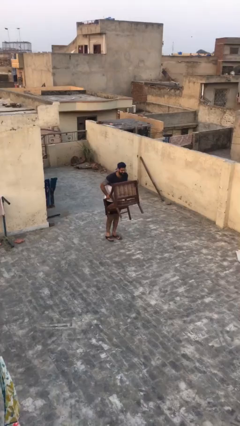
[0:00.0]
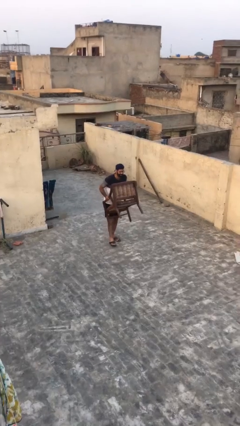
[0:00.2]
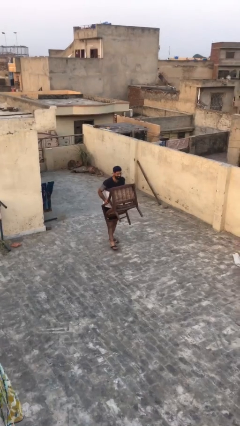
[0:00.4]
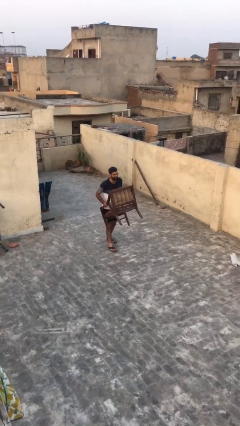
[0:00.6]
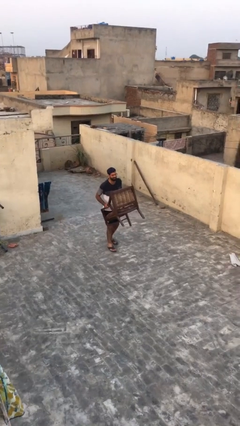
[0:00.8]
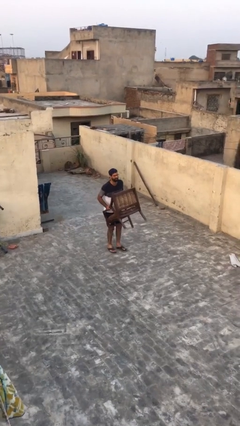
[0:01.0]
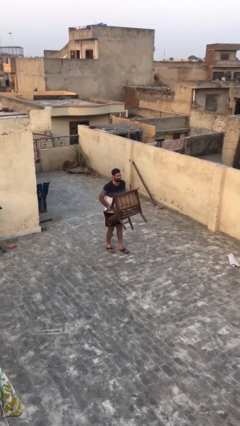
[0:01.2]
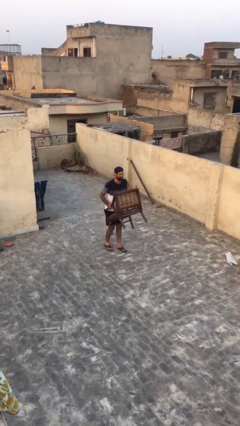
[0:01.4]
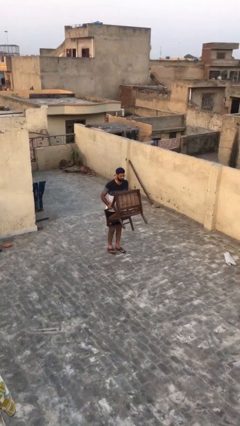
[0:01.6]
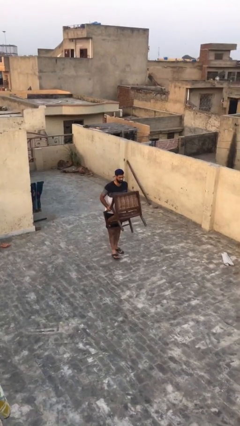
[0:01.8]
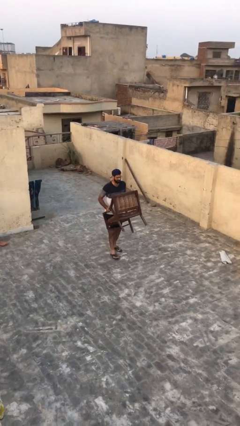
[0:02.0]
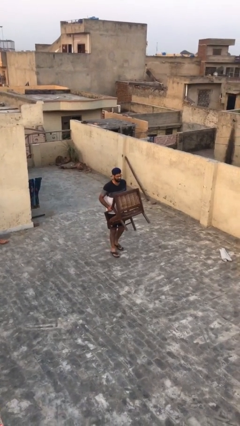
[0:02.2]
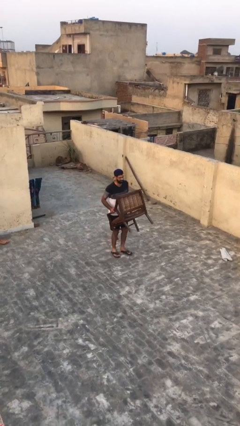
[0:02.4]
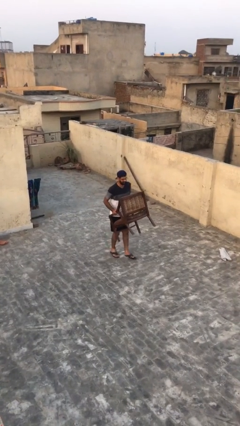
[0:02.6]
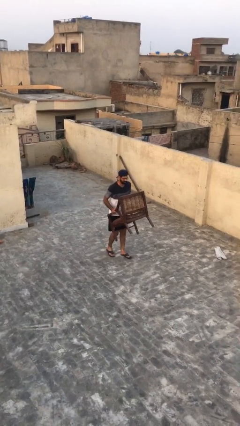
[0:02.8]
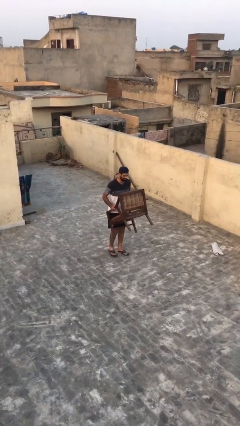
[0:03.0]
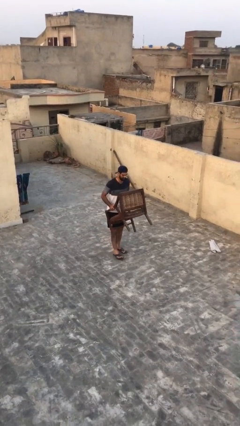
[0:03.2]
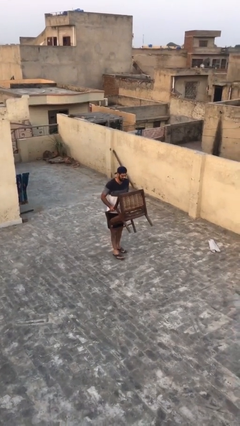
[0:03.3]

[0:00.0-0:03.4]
person carries heavy object

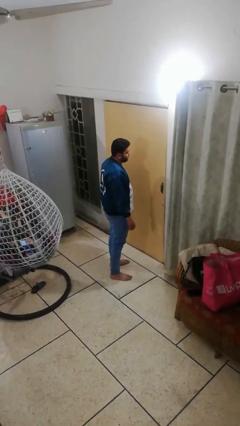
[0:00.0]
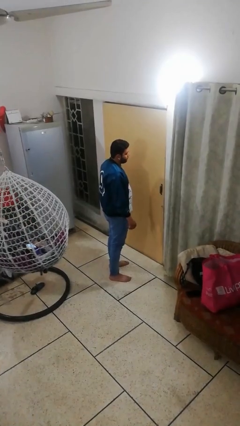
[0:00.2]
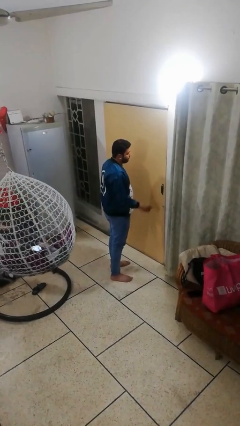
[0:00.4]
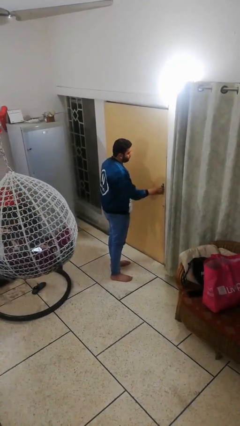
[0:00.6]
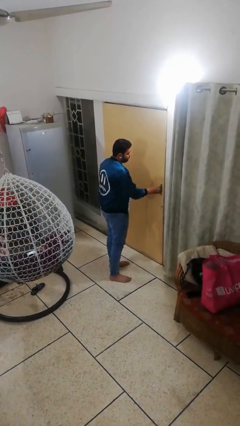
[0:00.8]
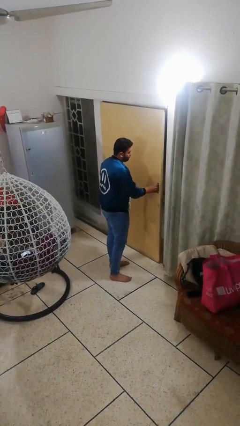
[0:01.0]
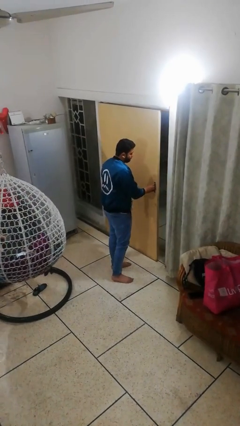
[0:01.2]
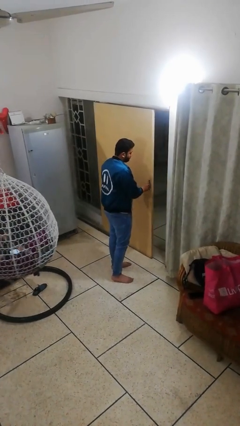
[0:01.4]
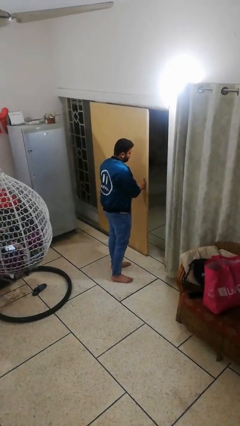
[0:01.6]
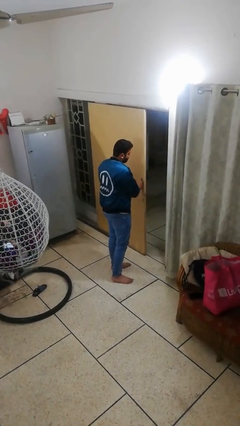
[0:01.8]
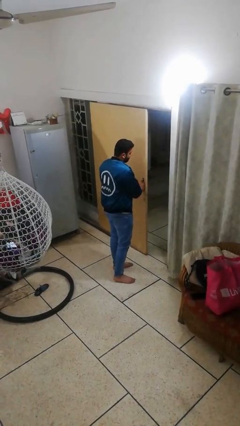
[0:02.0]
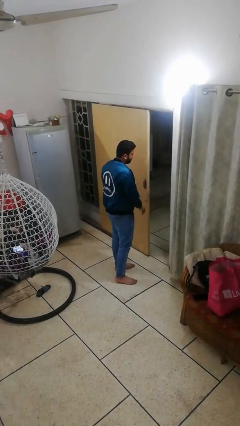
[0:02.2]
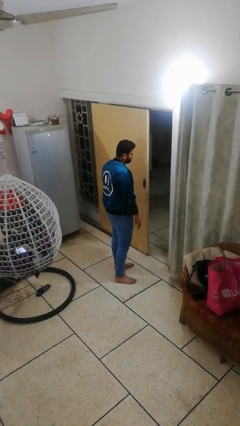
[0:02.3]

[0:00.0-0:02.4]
person opens facility door

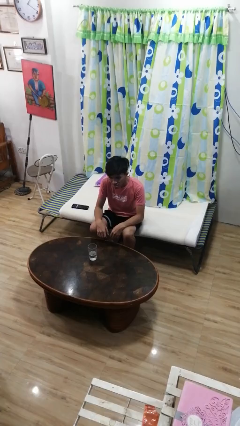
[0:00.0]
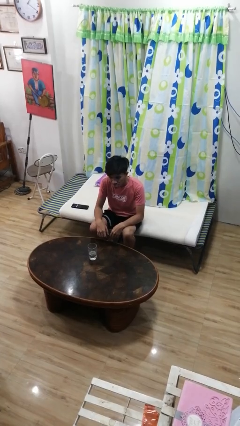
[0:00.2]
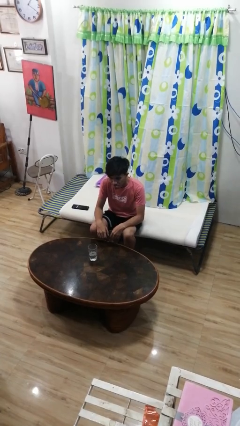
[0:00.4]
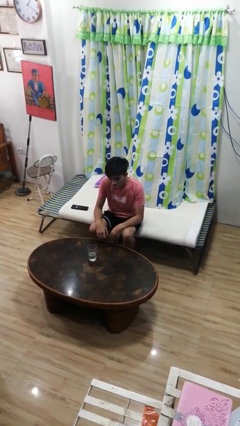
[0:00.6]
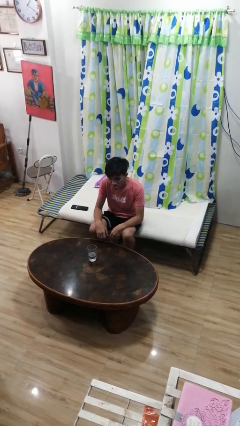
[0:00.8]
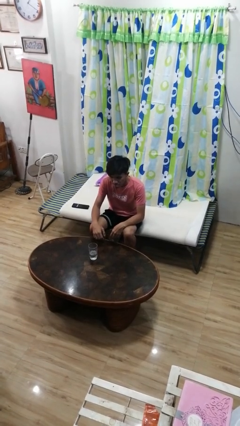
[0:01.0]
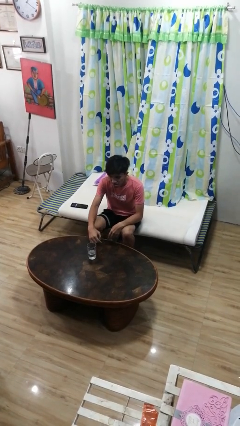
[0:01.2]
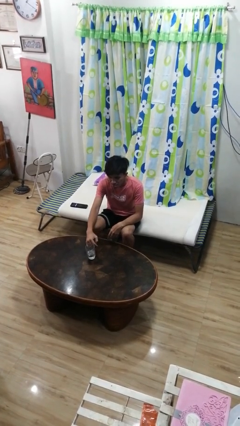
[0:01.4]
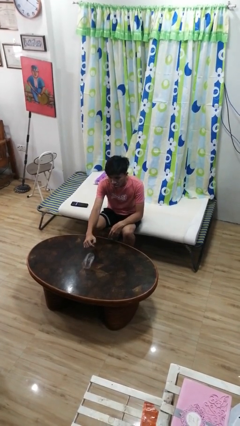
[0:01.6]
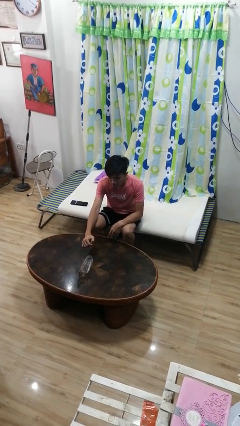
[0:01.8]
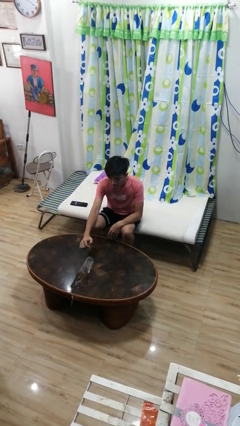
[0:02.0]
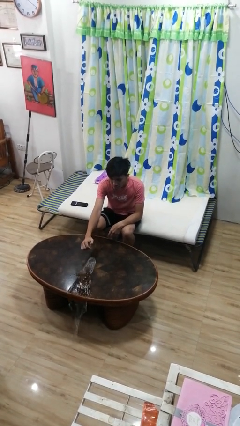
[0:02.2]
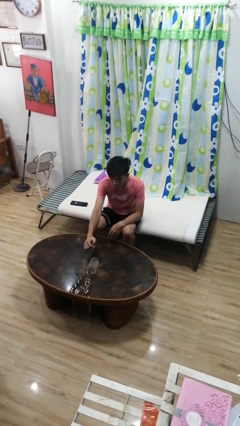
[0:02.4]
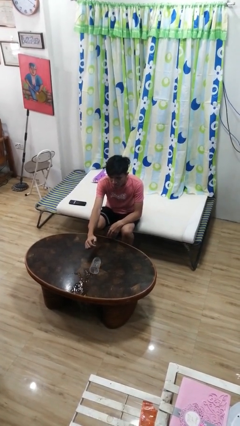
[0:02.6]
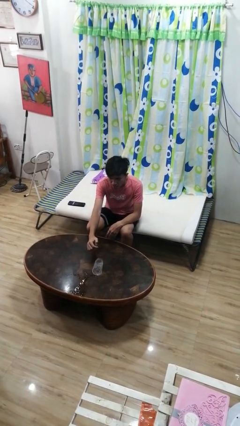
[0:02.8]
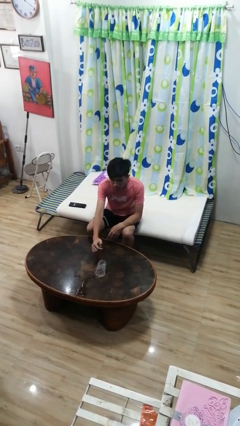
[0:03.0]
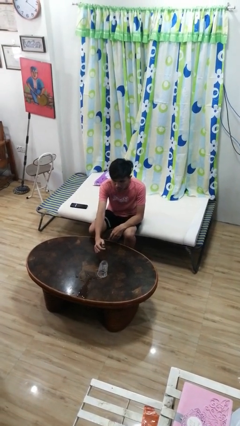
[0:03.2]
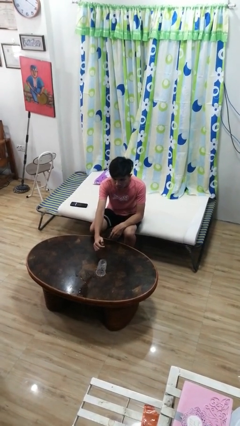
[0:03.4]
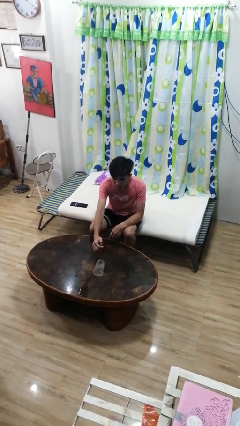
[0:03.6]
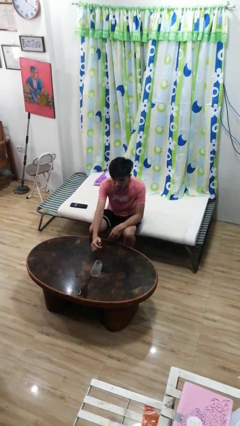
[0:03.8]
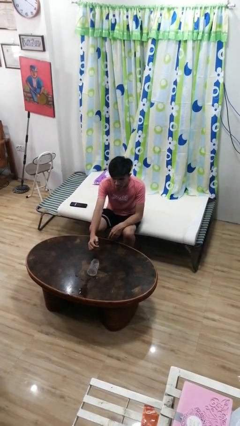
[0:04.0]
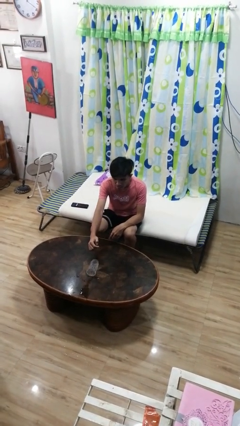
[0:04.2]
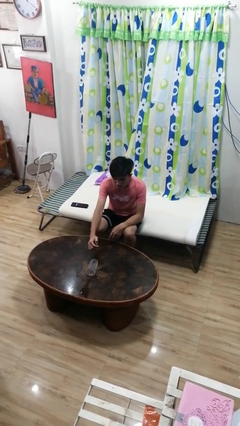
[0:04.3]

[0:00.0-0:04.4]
person spills on floor

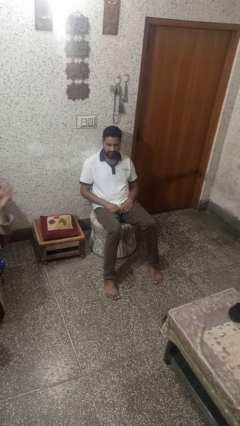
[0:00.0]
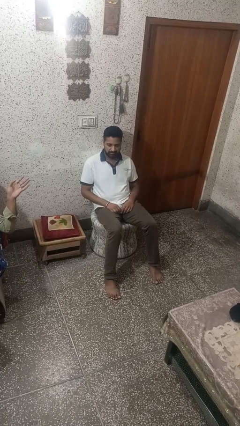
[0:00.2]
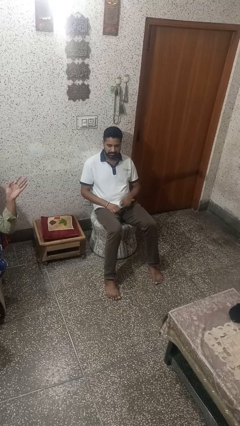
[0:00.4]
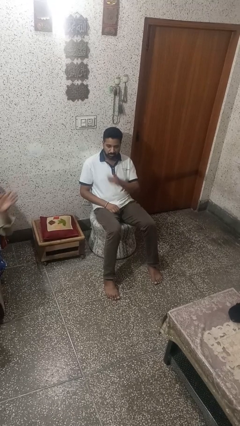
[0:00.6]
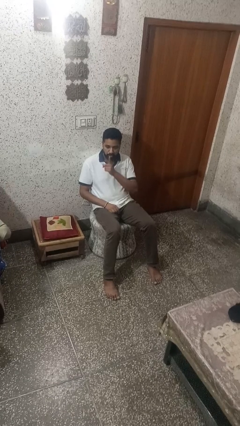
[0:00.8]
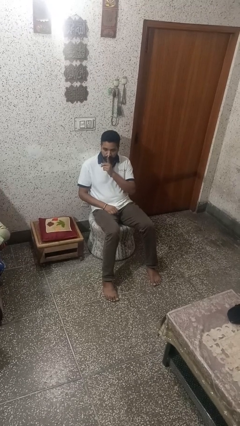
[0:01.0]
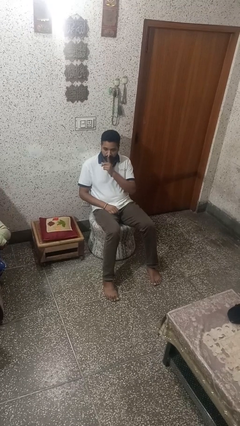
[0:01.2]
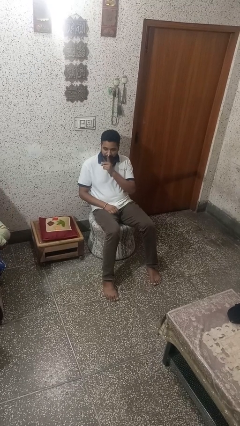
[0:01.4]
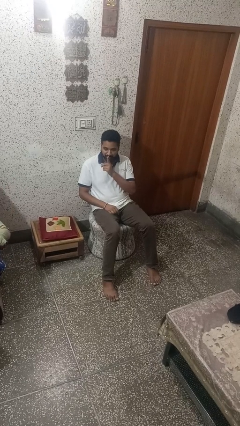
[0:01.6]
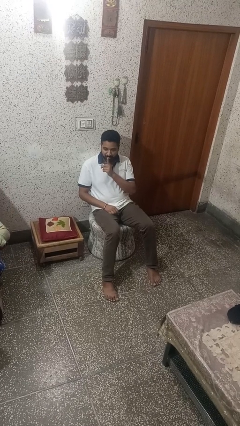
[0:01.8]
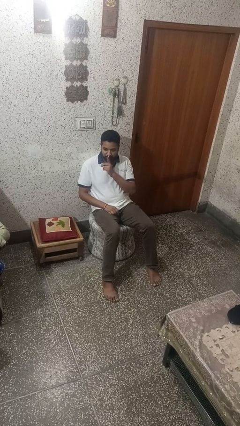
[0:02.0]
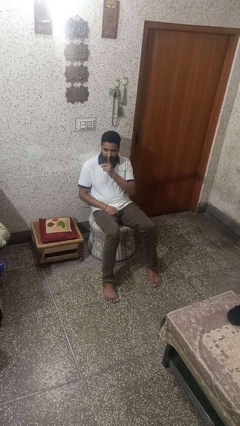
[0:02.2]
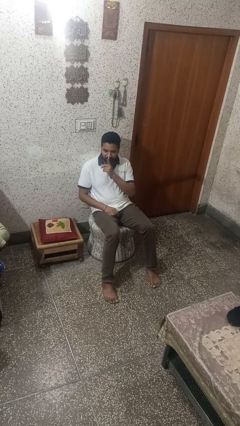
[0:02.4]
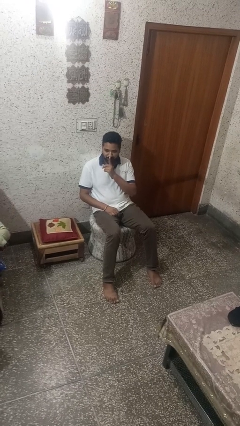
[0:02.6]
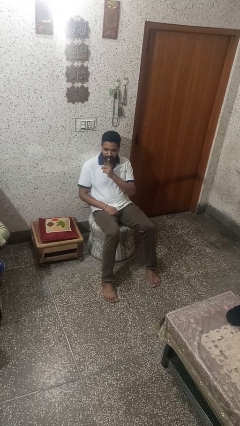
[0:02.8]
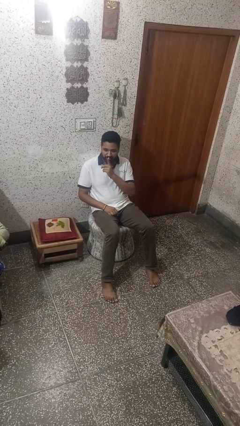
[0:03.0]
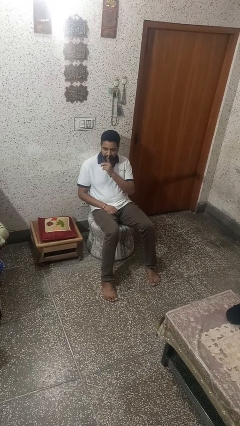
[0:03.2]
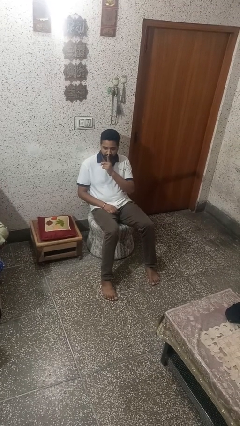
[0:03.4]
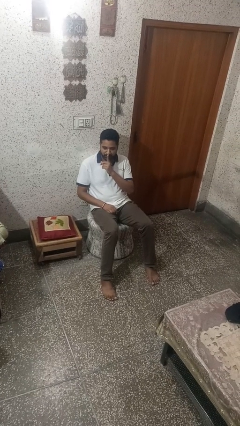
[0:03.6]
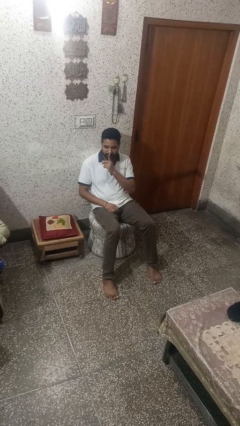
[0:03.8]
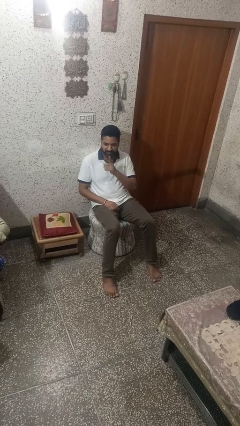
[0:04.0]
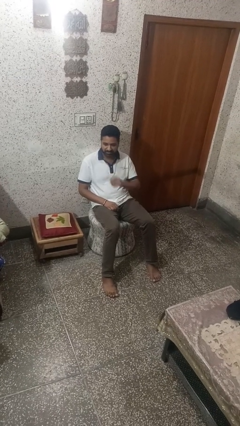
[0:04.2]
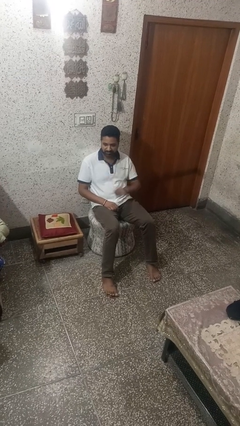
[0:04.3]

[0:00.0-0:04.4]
person gestures be quiet

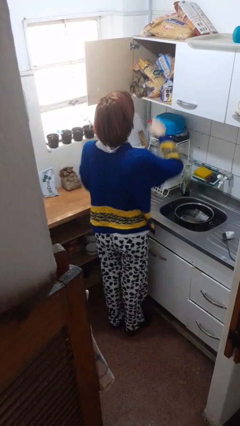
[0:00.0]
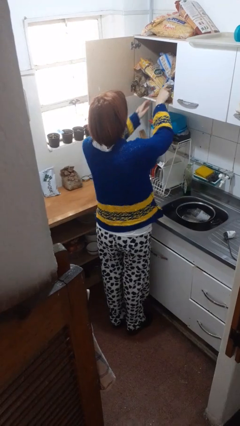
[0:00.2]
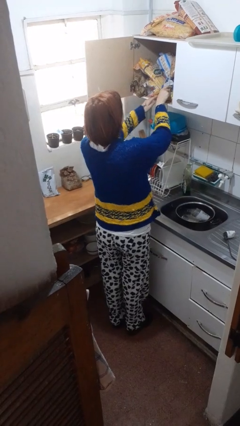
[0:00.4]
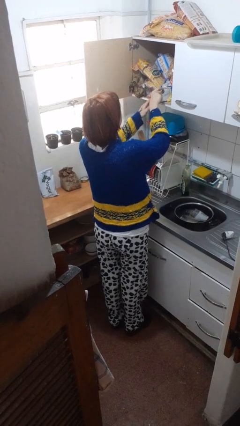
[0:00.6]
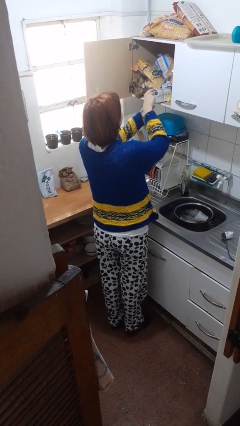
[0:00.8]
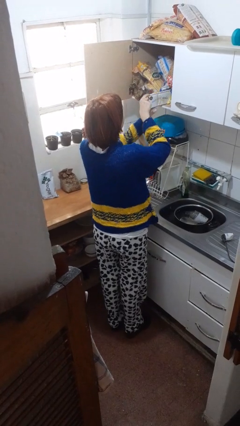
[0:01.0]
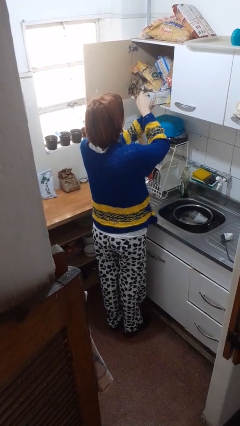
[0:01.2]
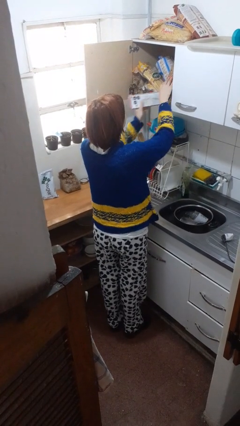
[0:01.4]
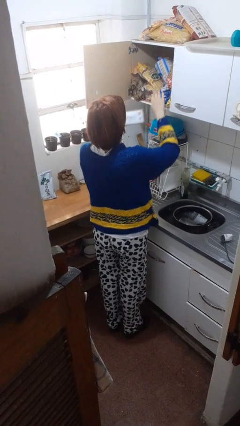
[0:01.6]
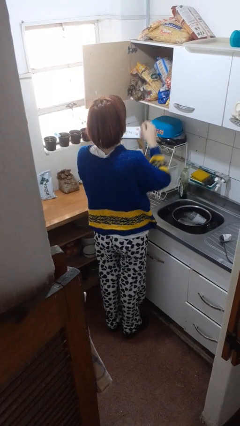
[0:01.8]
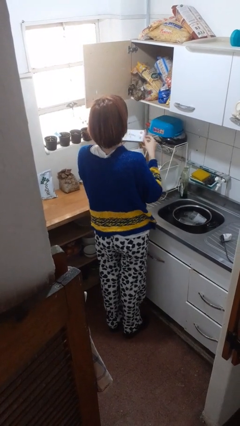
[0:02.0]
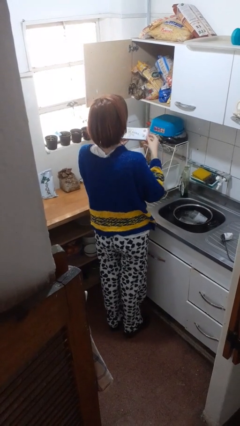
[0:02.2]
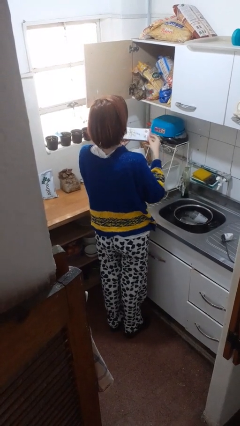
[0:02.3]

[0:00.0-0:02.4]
person takes object from cabinet

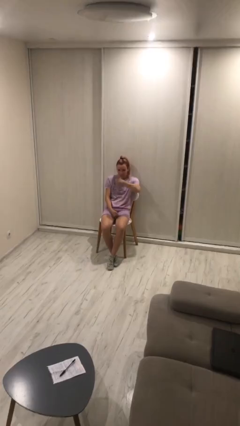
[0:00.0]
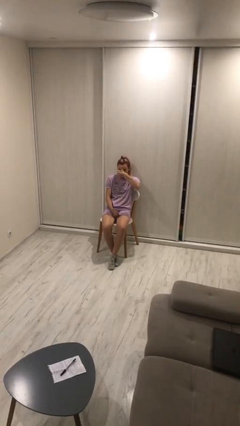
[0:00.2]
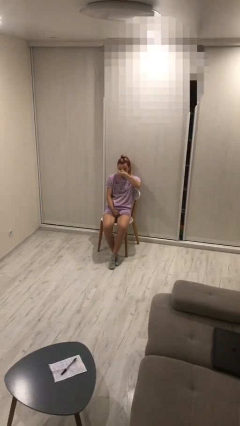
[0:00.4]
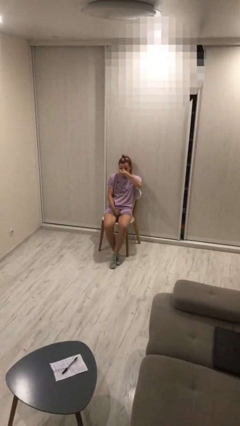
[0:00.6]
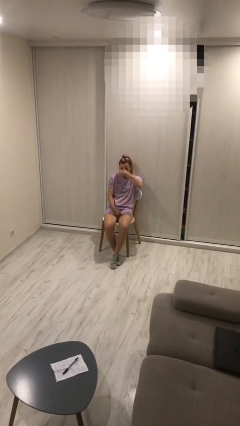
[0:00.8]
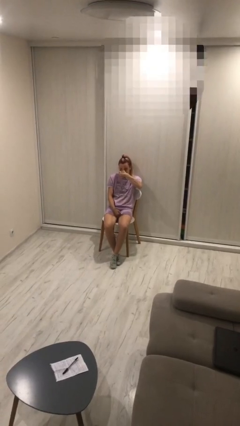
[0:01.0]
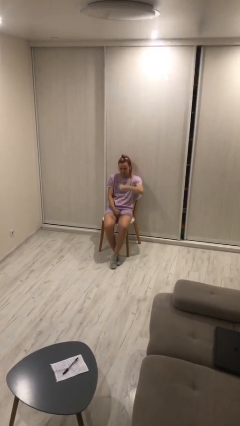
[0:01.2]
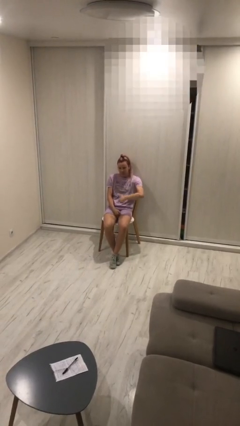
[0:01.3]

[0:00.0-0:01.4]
person gestures thumbs up
